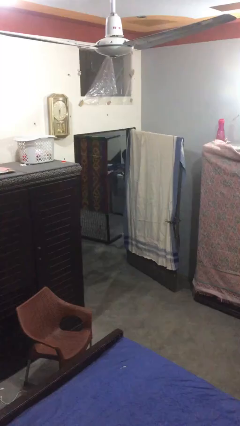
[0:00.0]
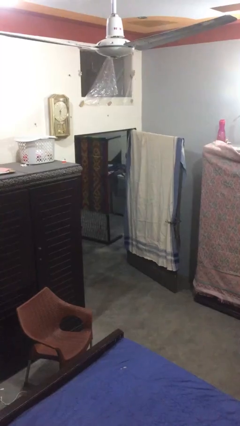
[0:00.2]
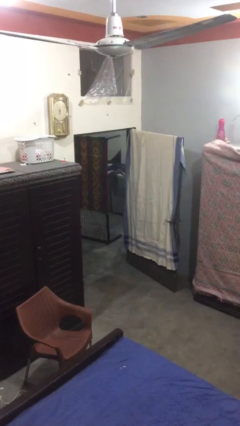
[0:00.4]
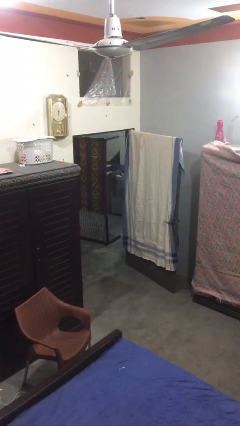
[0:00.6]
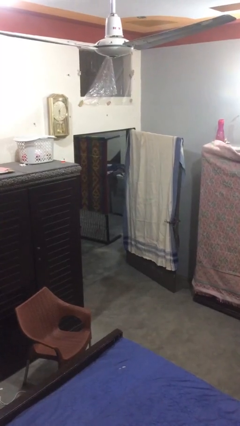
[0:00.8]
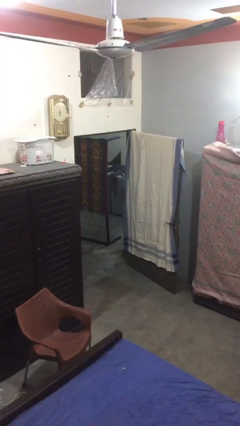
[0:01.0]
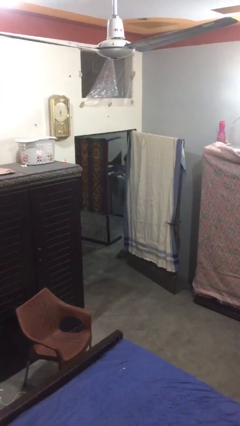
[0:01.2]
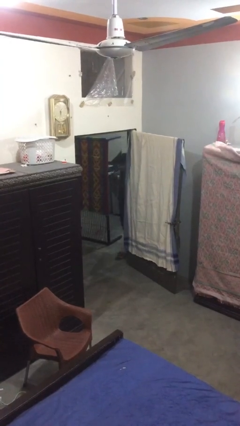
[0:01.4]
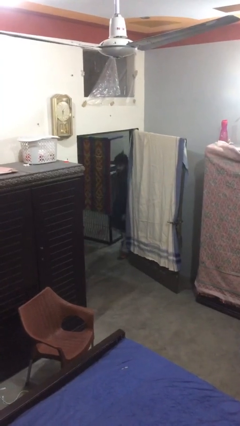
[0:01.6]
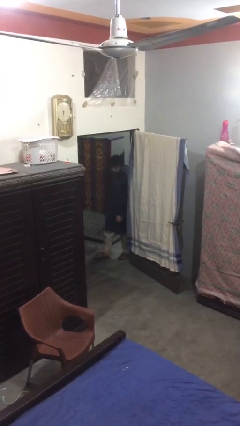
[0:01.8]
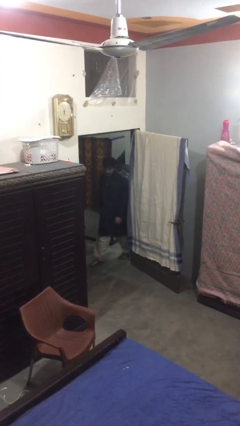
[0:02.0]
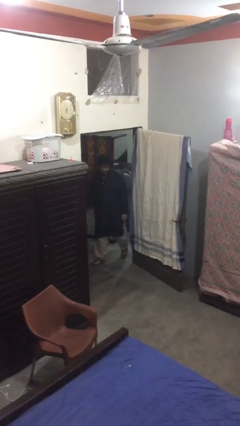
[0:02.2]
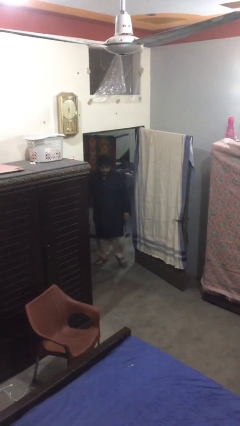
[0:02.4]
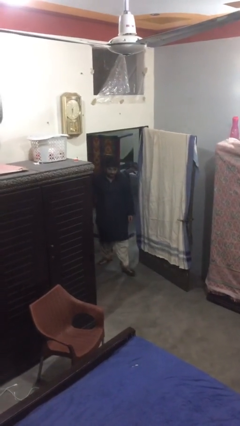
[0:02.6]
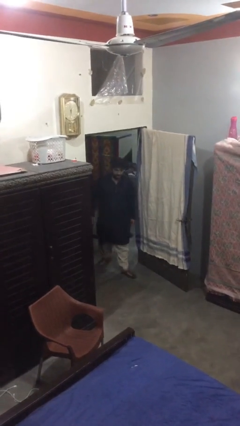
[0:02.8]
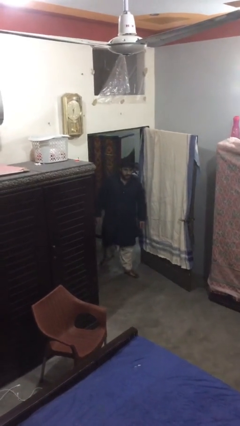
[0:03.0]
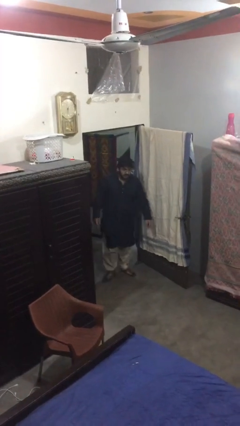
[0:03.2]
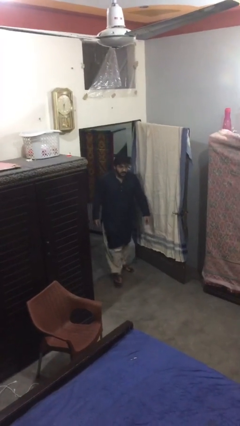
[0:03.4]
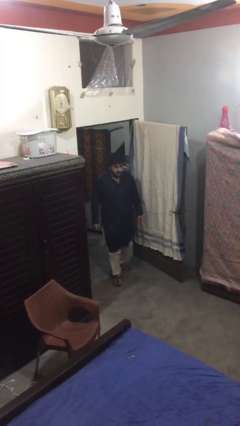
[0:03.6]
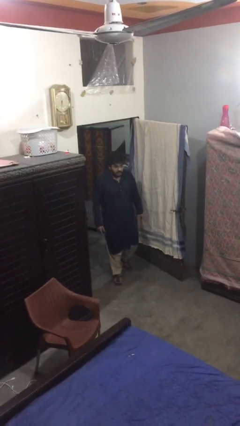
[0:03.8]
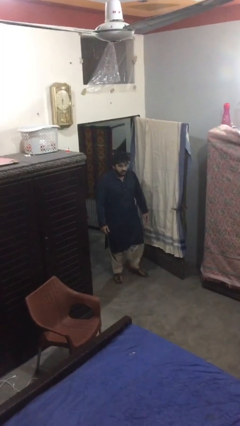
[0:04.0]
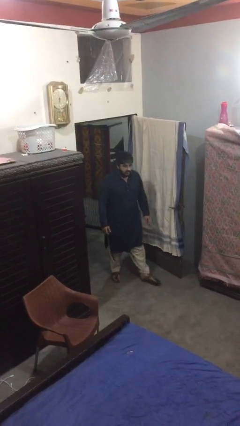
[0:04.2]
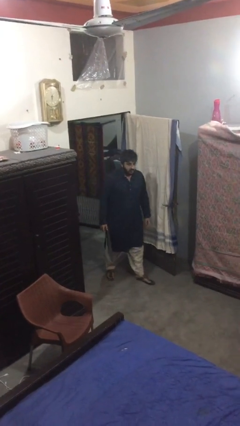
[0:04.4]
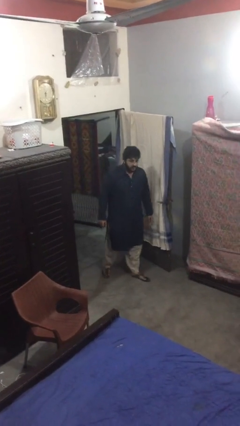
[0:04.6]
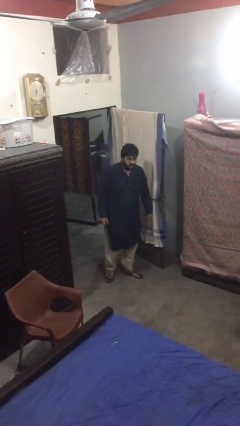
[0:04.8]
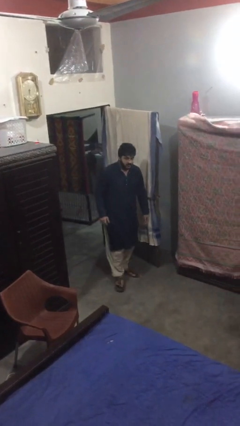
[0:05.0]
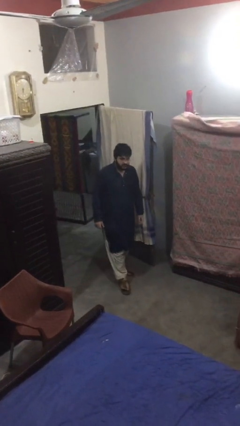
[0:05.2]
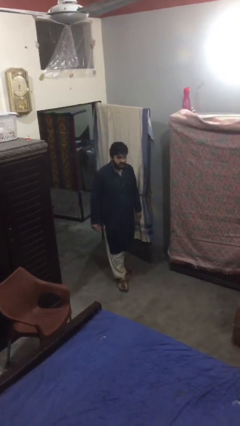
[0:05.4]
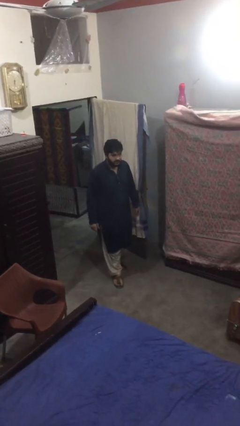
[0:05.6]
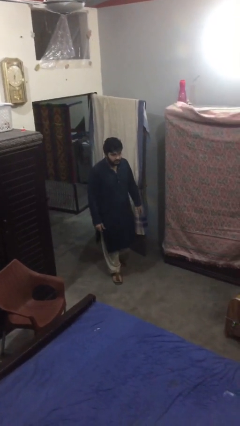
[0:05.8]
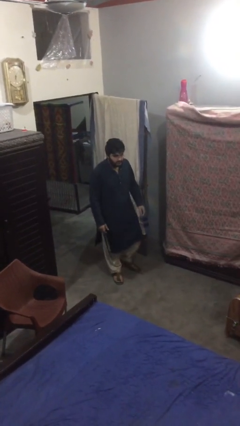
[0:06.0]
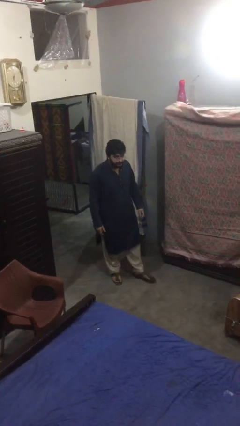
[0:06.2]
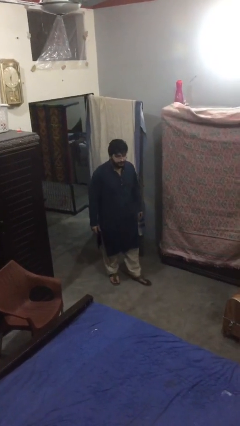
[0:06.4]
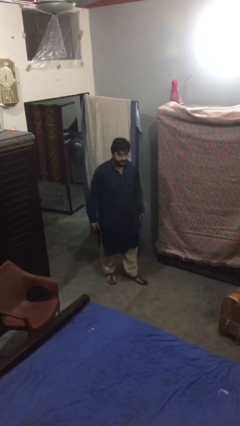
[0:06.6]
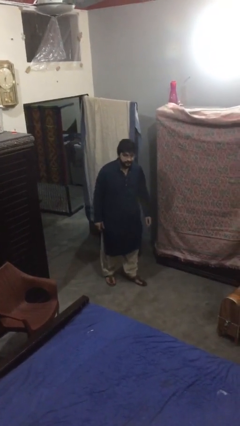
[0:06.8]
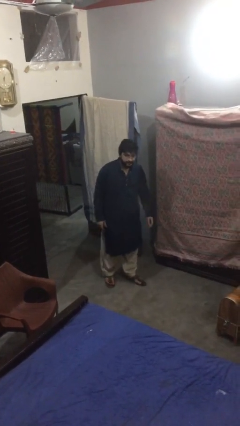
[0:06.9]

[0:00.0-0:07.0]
person enters scene through structure

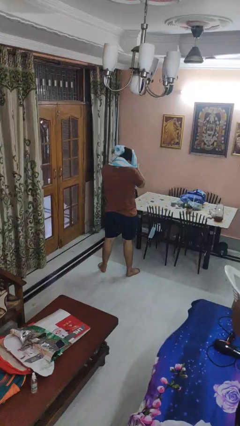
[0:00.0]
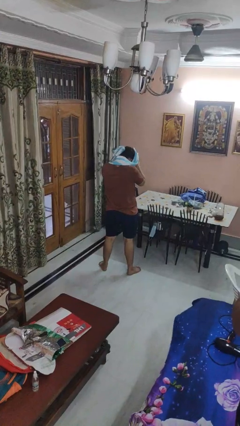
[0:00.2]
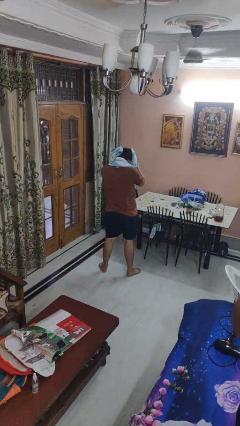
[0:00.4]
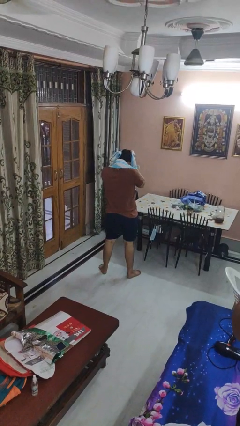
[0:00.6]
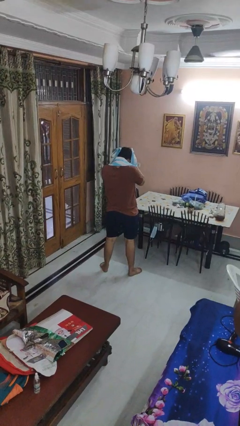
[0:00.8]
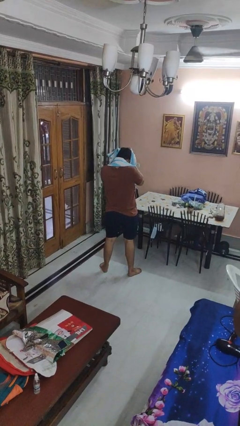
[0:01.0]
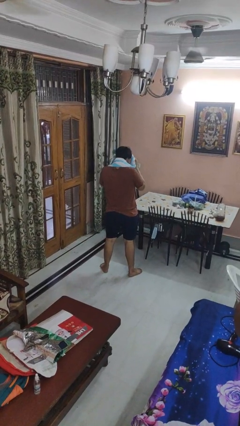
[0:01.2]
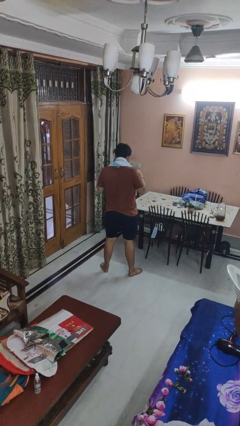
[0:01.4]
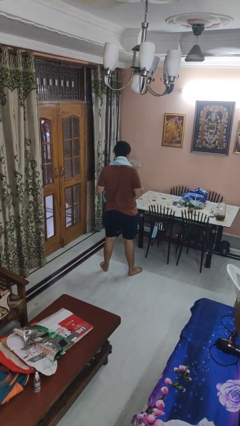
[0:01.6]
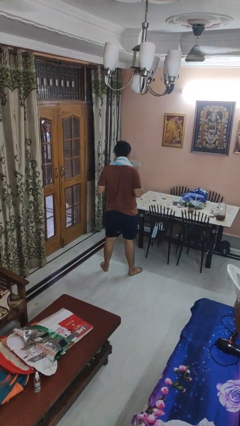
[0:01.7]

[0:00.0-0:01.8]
person dries hair with towel

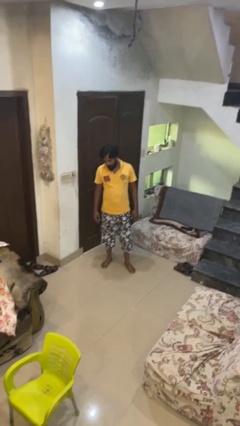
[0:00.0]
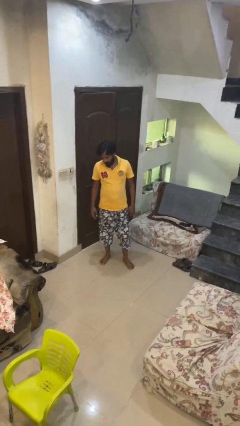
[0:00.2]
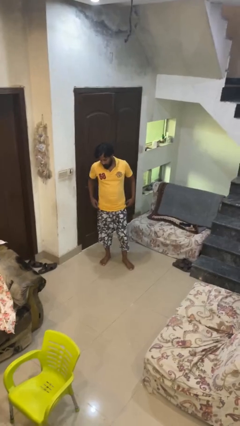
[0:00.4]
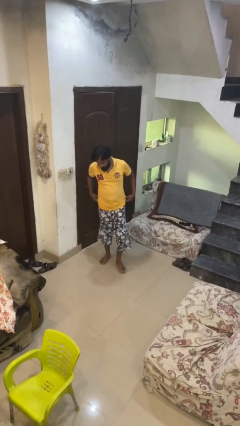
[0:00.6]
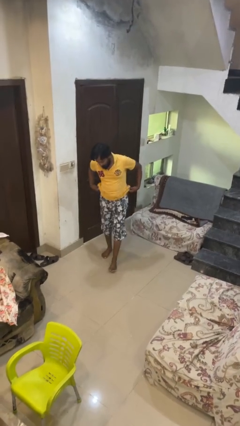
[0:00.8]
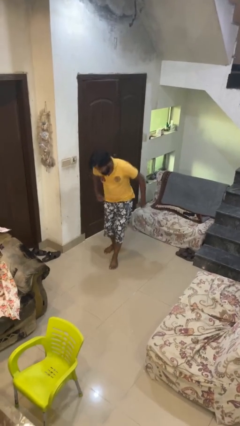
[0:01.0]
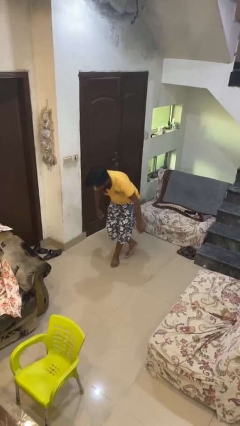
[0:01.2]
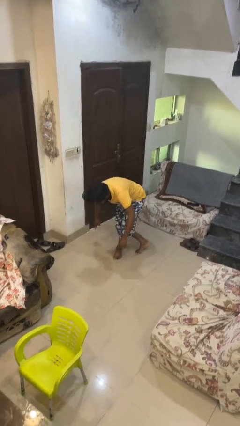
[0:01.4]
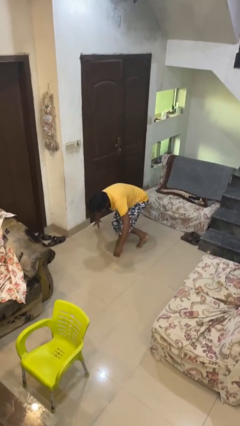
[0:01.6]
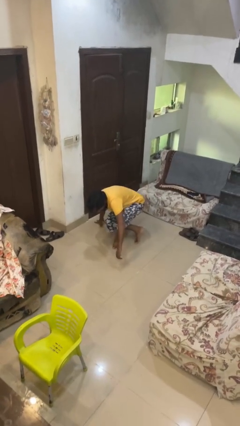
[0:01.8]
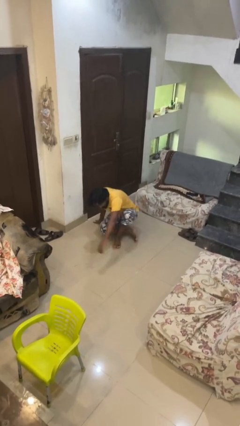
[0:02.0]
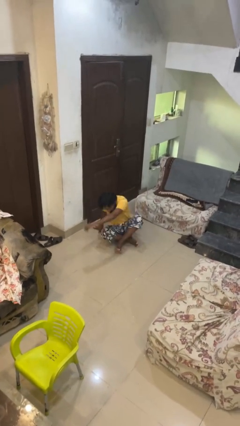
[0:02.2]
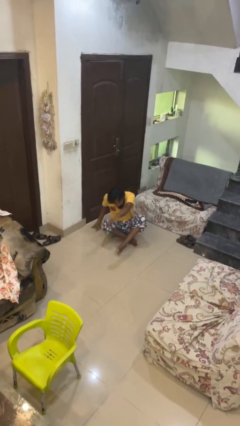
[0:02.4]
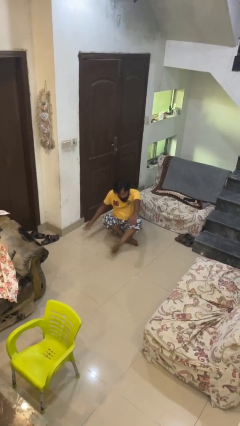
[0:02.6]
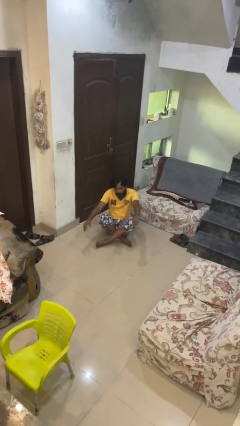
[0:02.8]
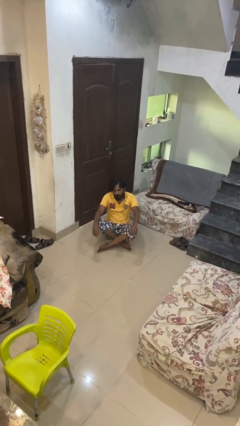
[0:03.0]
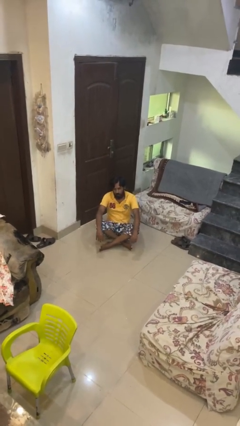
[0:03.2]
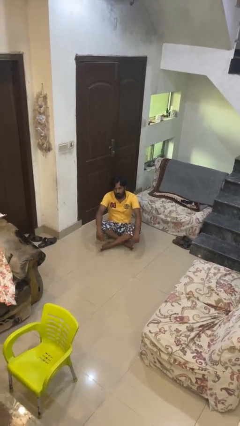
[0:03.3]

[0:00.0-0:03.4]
person sits crisscross

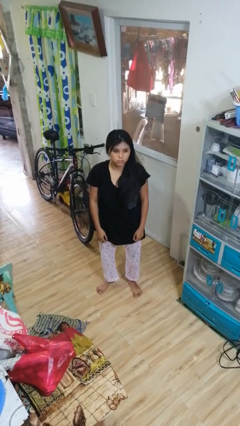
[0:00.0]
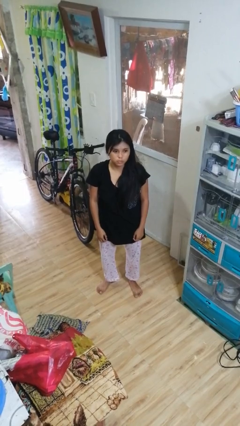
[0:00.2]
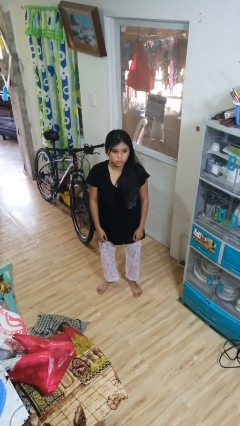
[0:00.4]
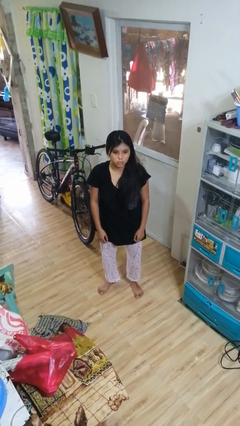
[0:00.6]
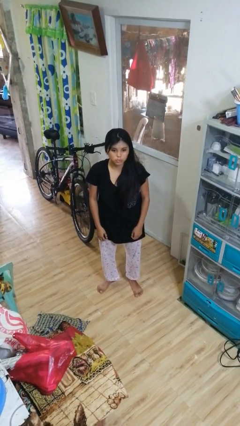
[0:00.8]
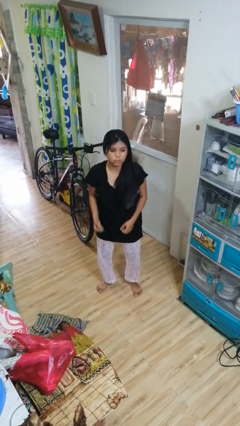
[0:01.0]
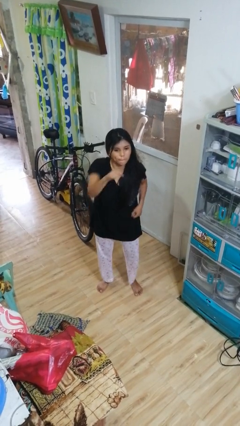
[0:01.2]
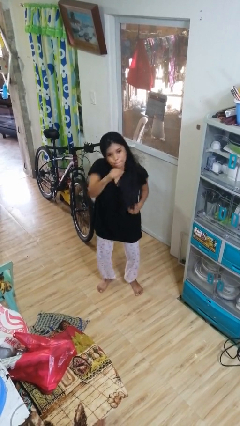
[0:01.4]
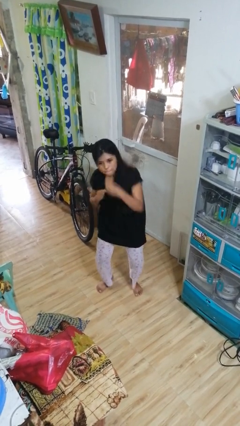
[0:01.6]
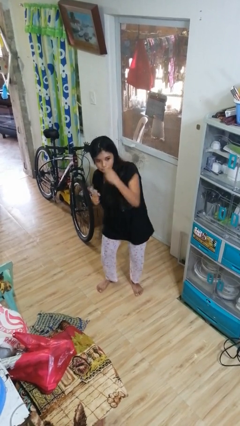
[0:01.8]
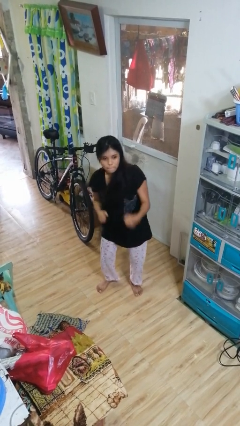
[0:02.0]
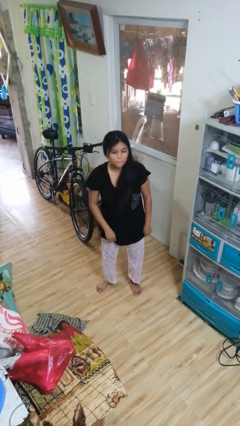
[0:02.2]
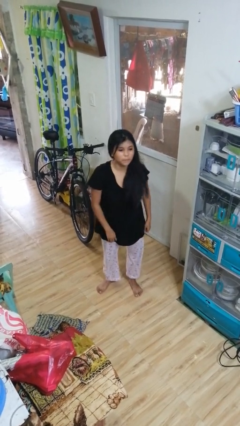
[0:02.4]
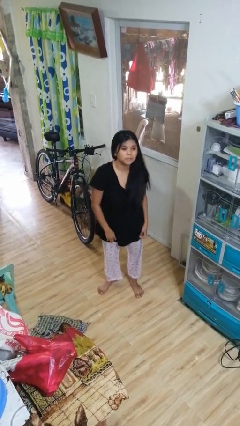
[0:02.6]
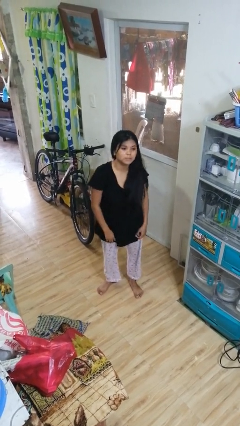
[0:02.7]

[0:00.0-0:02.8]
person punches

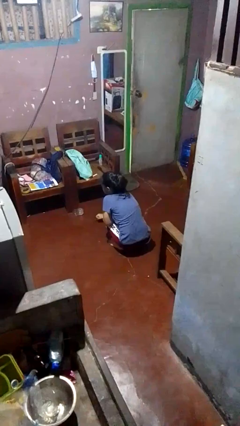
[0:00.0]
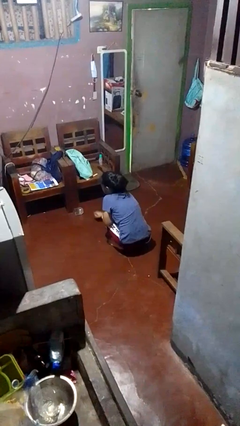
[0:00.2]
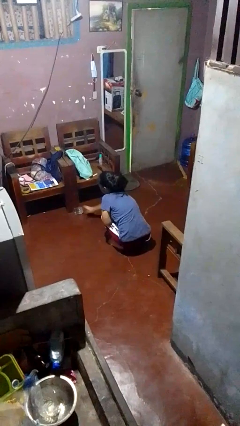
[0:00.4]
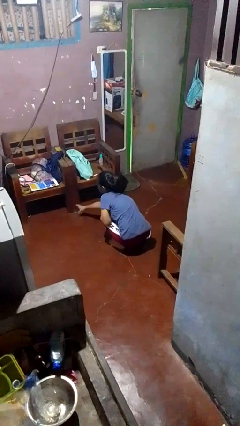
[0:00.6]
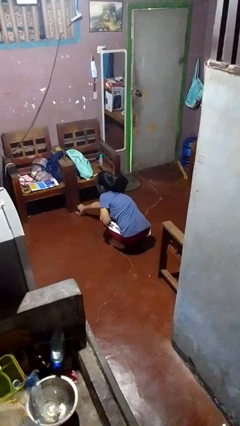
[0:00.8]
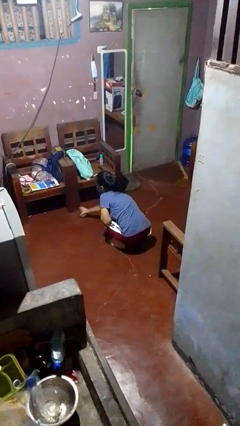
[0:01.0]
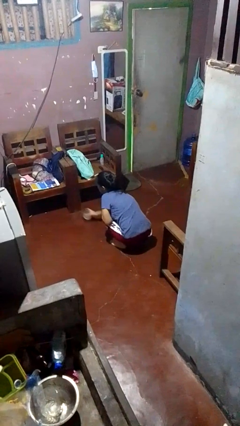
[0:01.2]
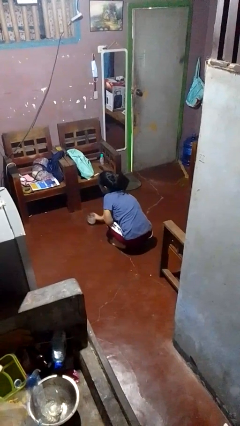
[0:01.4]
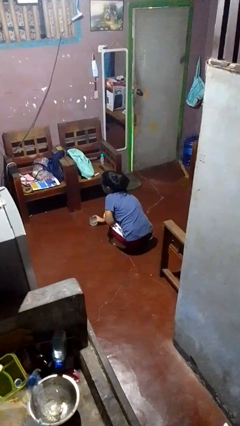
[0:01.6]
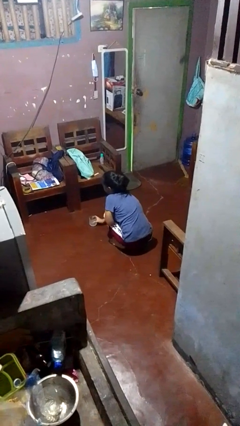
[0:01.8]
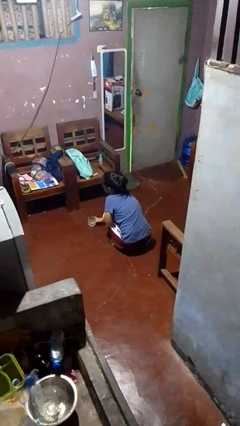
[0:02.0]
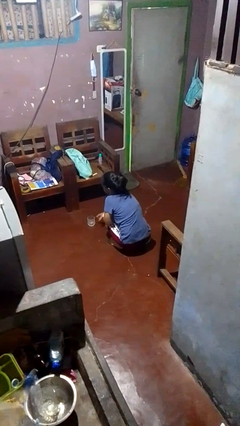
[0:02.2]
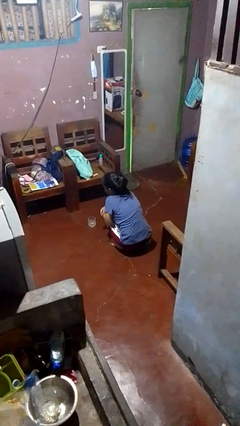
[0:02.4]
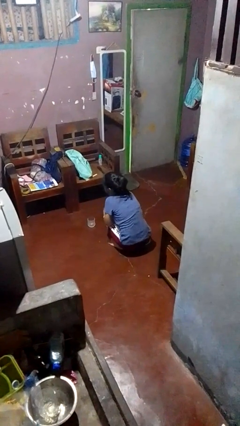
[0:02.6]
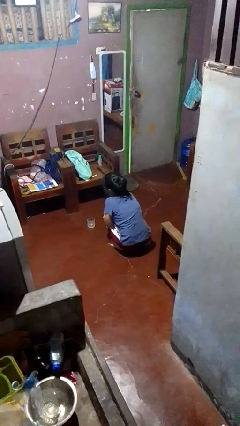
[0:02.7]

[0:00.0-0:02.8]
person sets upright glass
